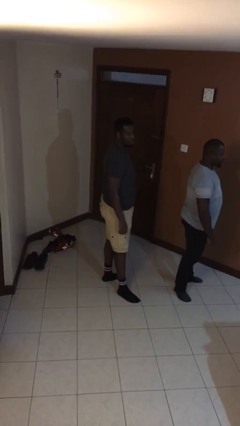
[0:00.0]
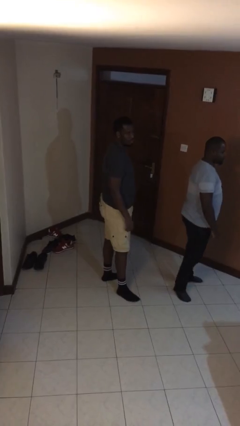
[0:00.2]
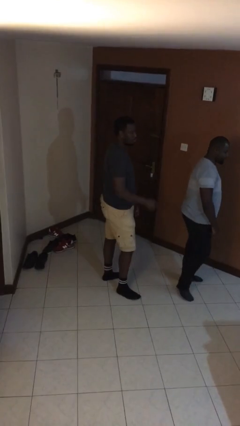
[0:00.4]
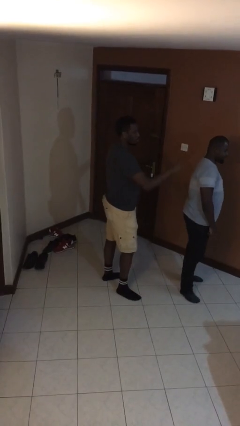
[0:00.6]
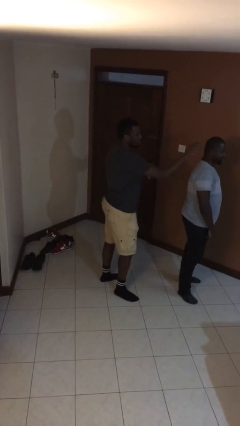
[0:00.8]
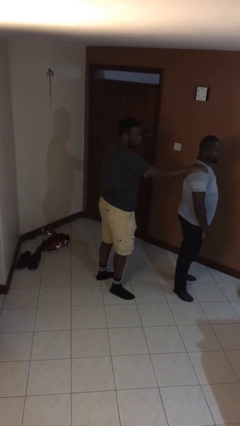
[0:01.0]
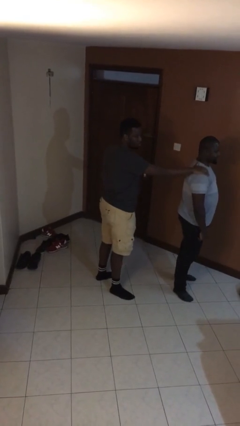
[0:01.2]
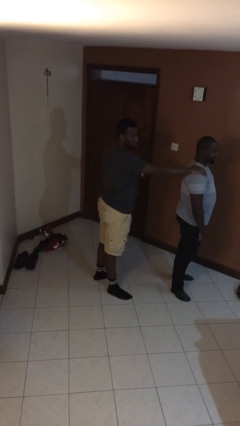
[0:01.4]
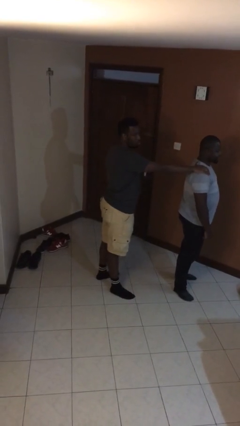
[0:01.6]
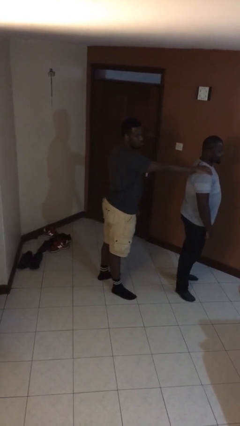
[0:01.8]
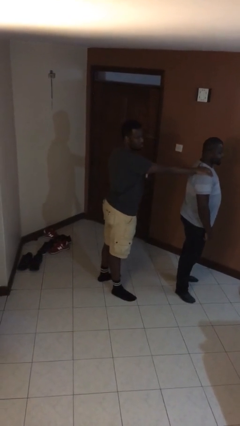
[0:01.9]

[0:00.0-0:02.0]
person grabs person by shoulder

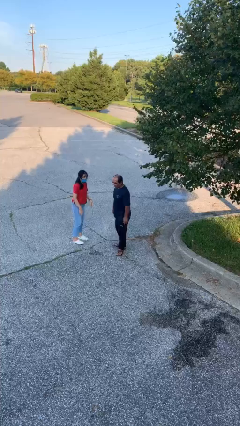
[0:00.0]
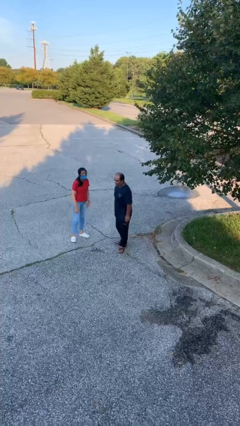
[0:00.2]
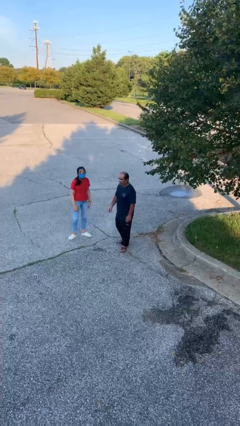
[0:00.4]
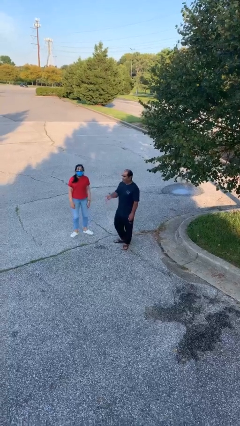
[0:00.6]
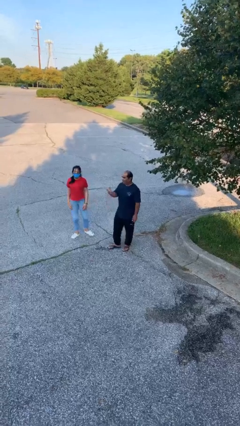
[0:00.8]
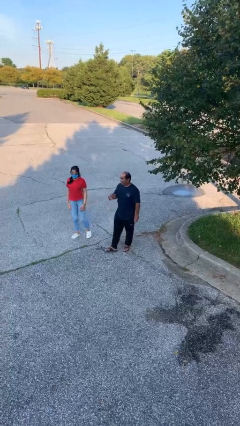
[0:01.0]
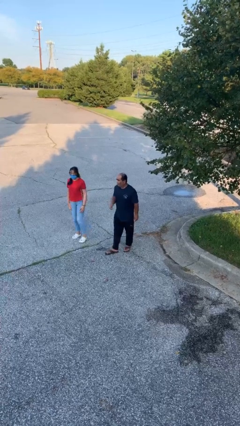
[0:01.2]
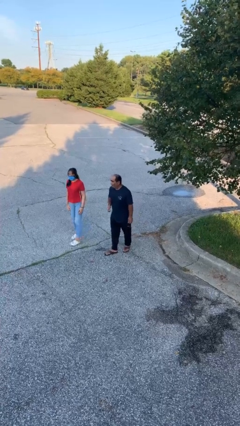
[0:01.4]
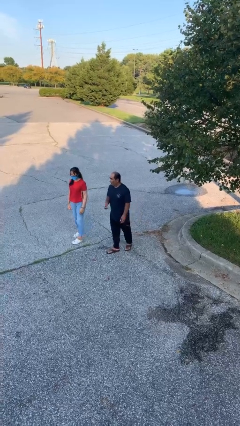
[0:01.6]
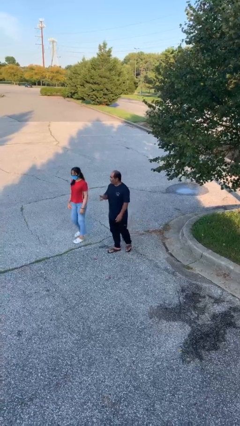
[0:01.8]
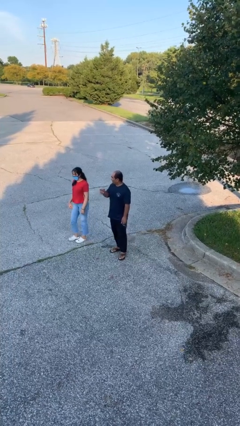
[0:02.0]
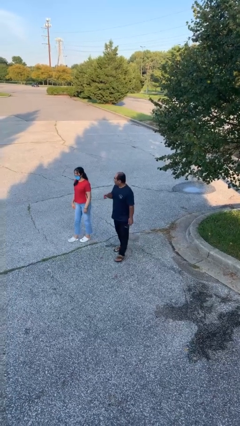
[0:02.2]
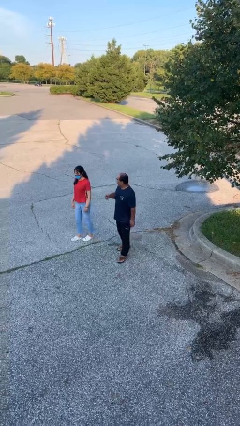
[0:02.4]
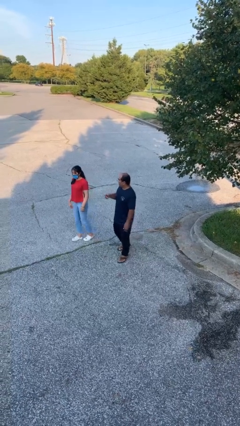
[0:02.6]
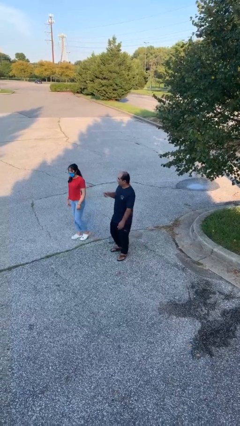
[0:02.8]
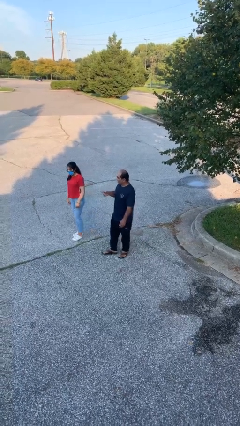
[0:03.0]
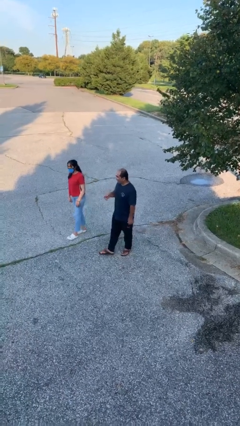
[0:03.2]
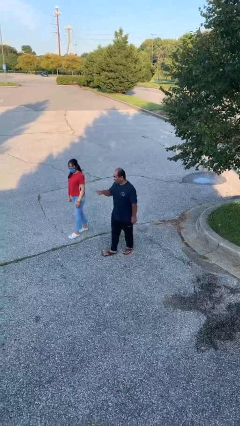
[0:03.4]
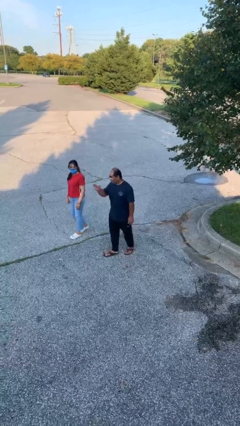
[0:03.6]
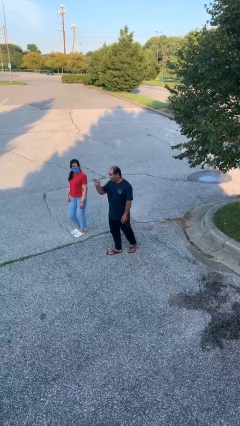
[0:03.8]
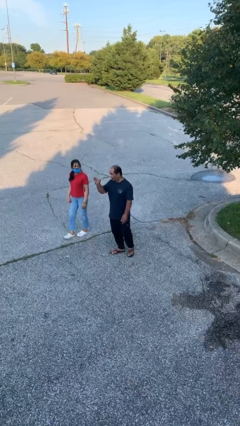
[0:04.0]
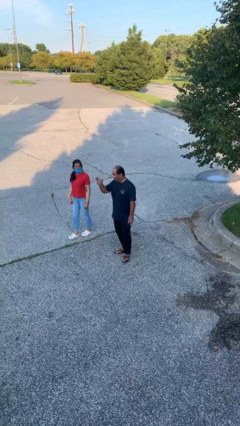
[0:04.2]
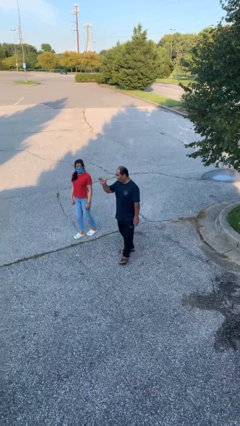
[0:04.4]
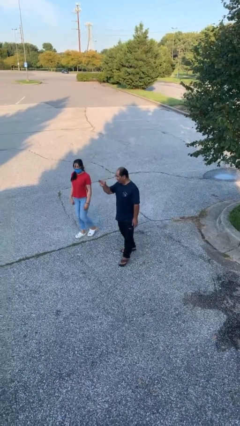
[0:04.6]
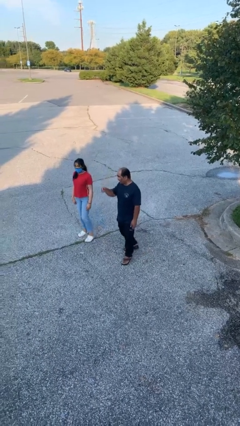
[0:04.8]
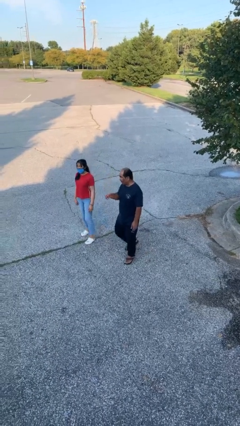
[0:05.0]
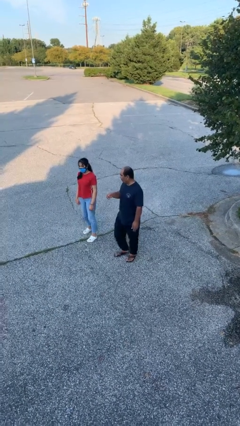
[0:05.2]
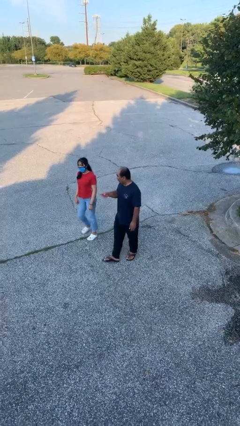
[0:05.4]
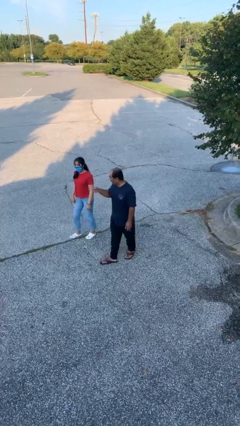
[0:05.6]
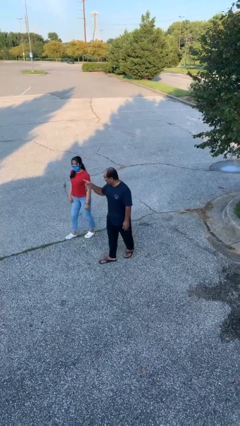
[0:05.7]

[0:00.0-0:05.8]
person talks to person

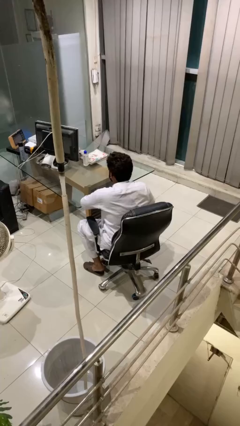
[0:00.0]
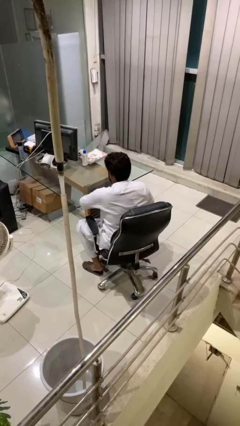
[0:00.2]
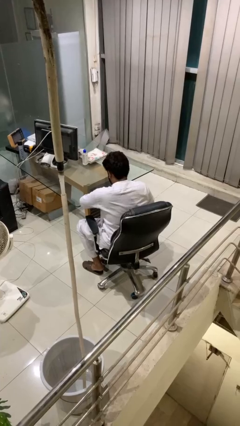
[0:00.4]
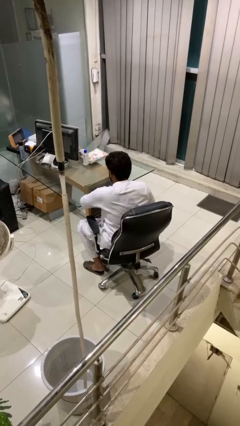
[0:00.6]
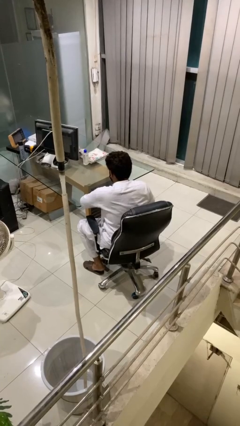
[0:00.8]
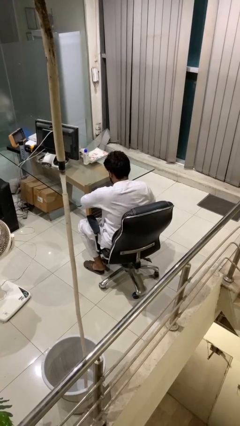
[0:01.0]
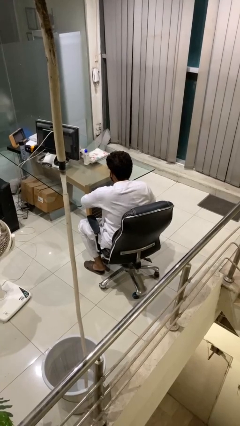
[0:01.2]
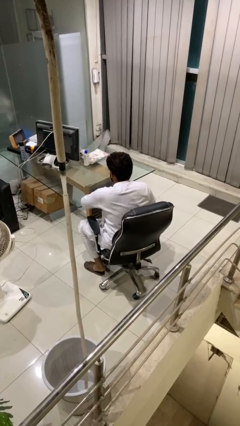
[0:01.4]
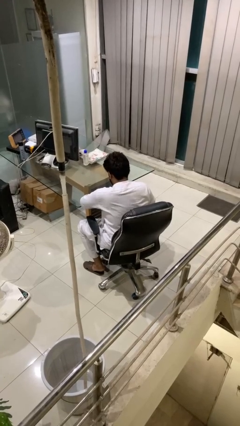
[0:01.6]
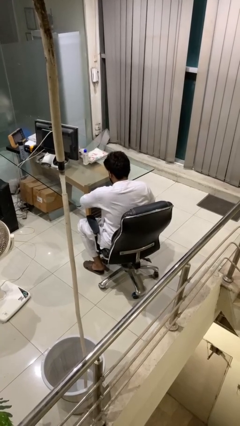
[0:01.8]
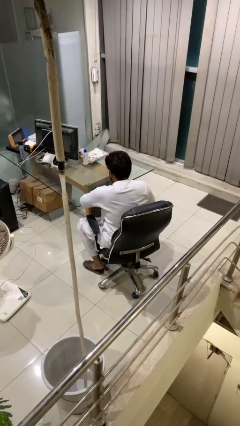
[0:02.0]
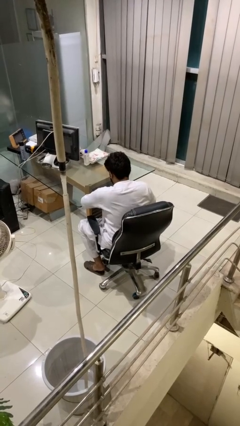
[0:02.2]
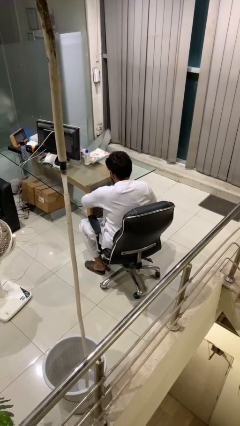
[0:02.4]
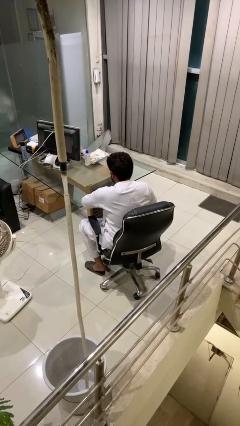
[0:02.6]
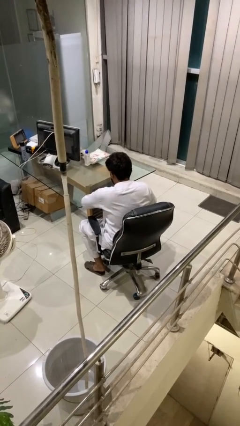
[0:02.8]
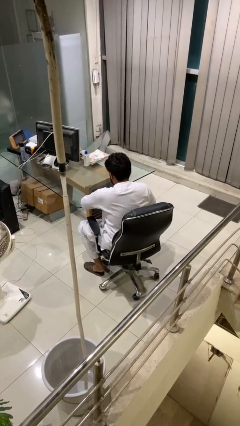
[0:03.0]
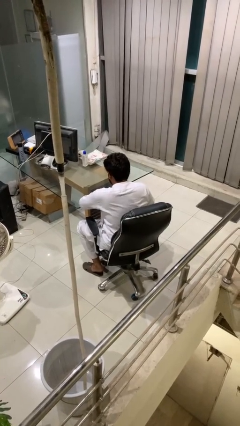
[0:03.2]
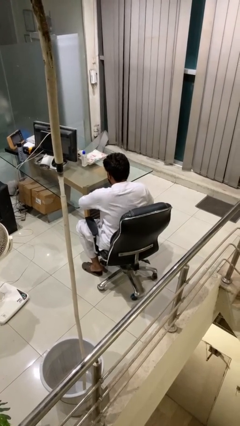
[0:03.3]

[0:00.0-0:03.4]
person nods head

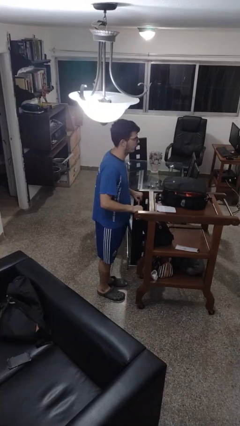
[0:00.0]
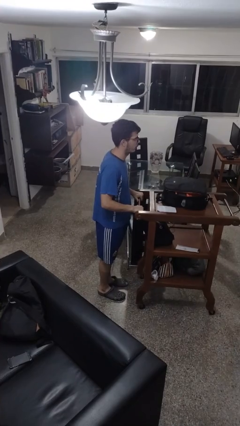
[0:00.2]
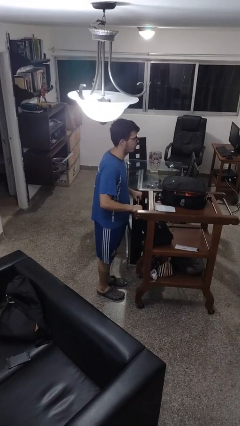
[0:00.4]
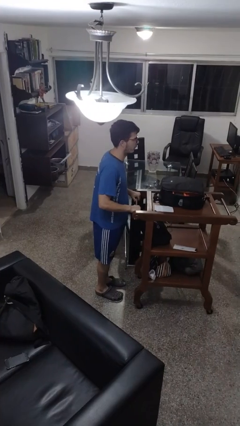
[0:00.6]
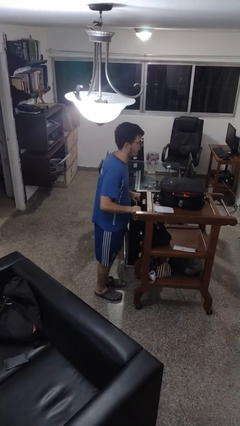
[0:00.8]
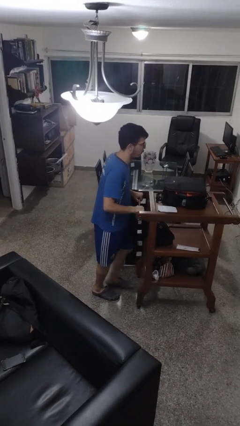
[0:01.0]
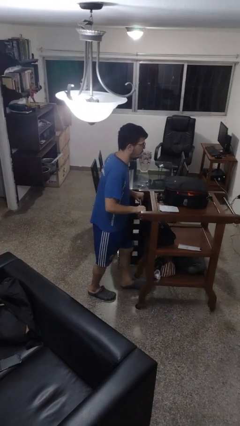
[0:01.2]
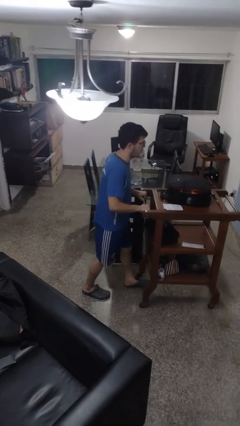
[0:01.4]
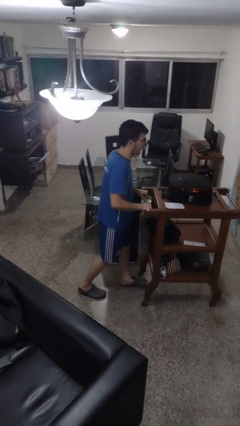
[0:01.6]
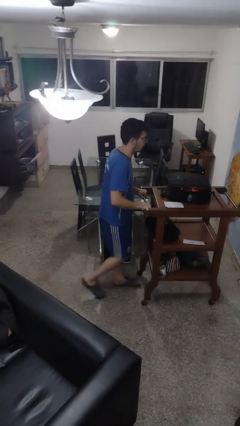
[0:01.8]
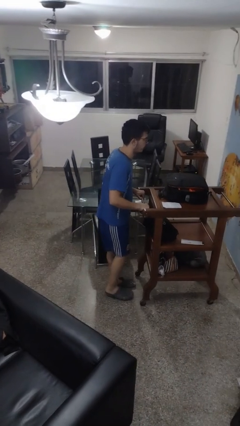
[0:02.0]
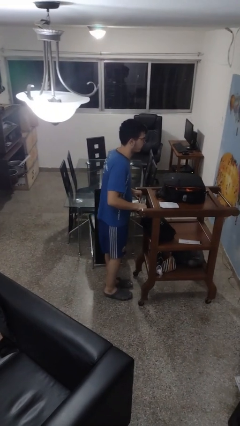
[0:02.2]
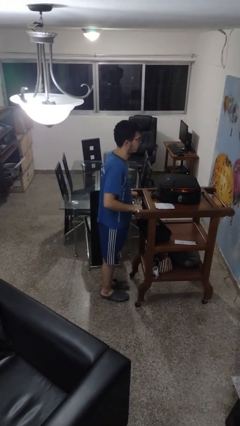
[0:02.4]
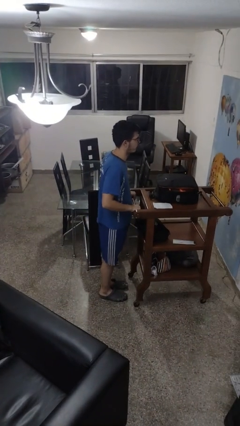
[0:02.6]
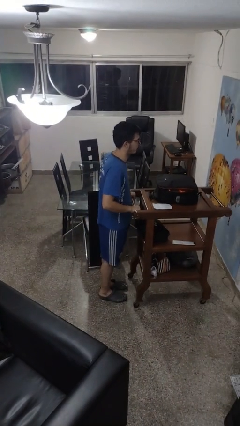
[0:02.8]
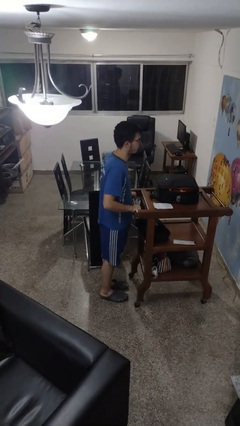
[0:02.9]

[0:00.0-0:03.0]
person pushes wheeled cart

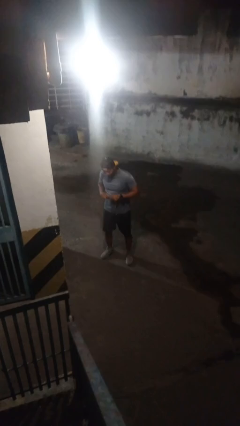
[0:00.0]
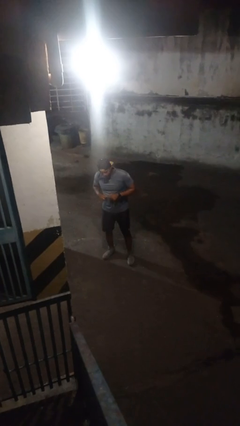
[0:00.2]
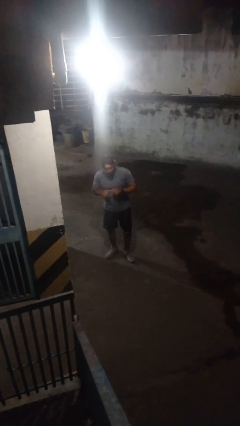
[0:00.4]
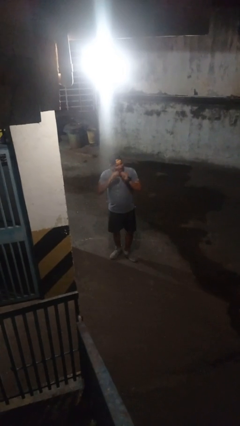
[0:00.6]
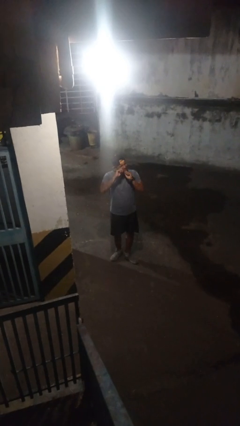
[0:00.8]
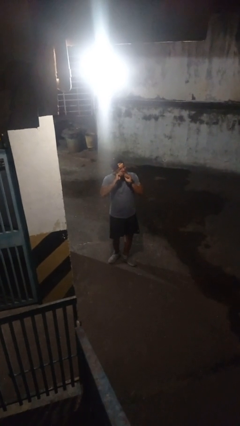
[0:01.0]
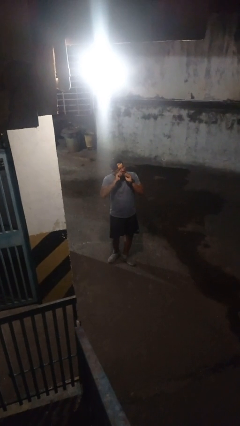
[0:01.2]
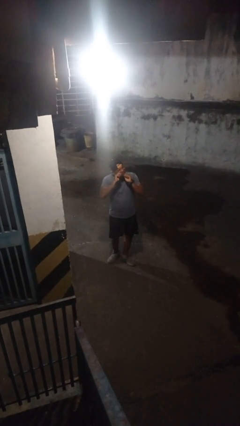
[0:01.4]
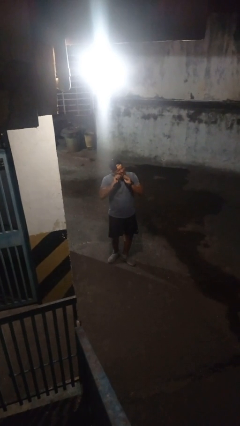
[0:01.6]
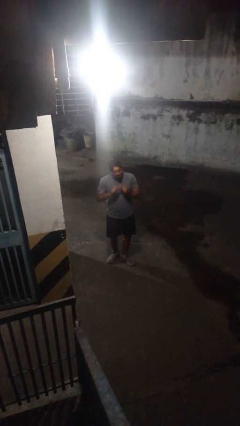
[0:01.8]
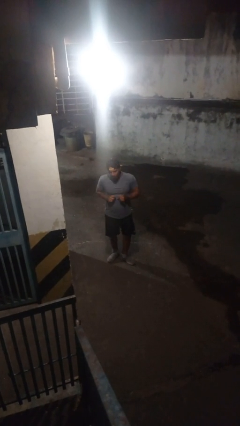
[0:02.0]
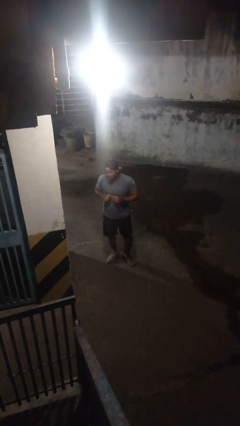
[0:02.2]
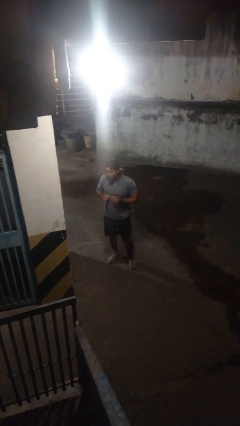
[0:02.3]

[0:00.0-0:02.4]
person flosses

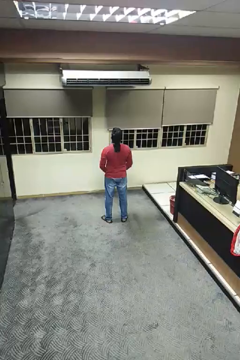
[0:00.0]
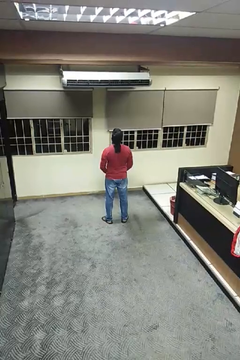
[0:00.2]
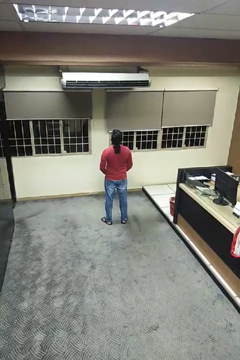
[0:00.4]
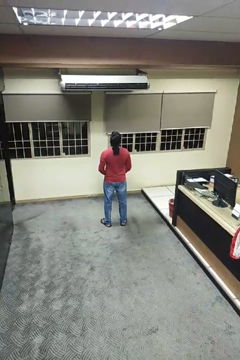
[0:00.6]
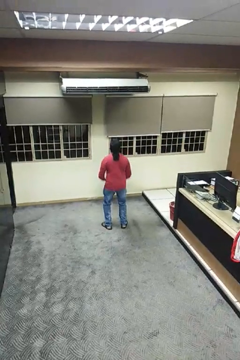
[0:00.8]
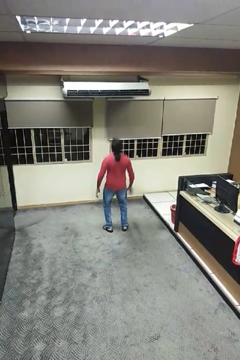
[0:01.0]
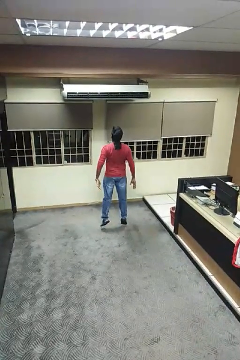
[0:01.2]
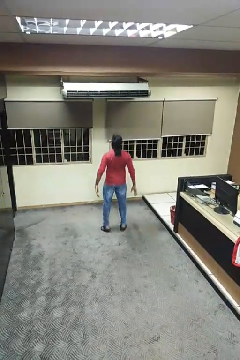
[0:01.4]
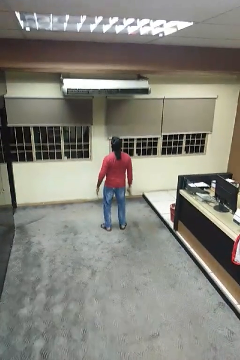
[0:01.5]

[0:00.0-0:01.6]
person jumps
